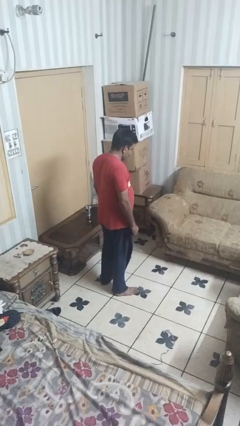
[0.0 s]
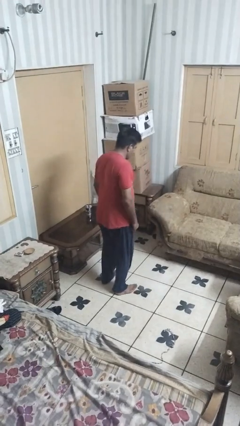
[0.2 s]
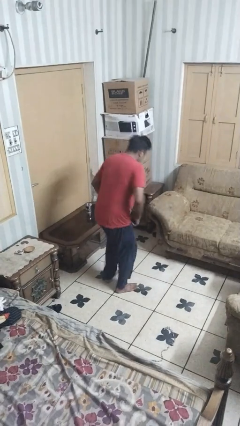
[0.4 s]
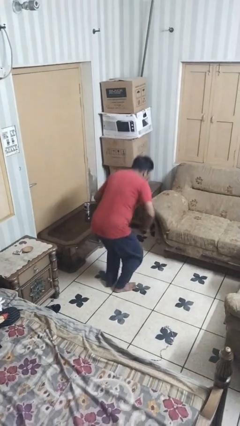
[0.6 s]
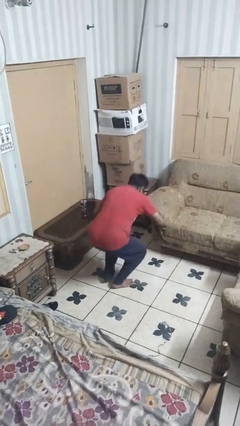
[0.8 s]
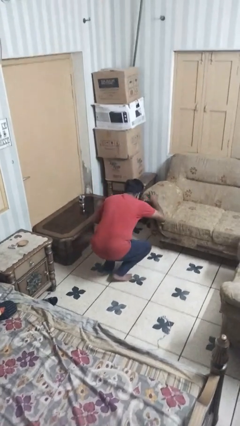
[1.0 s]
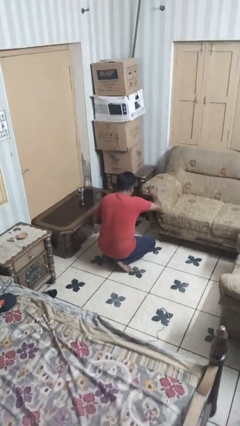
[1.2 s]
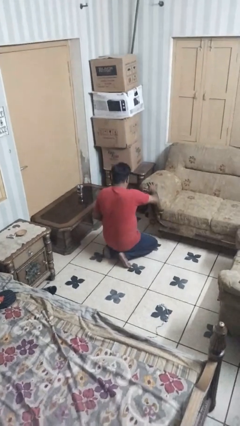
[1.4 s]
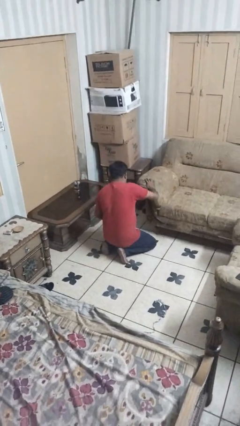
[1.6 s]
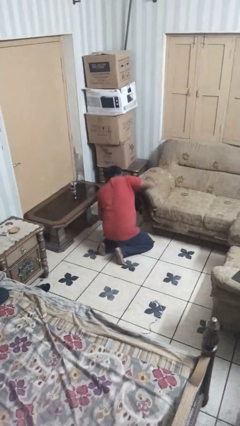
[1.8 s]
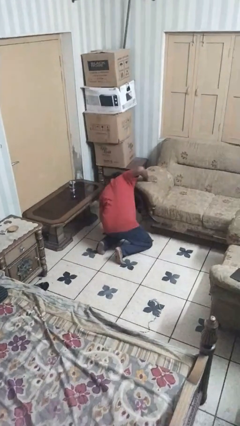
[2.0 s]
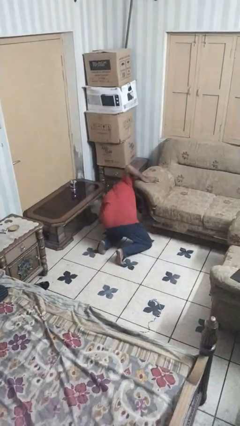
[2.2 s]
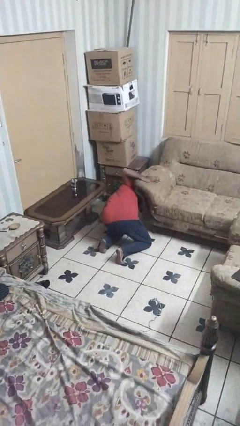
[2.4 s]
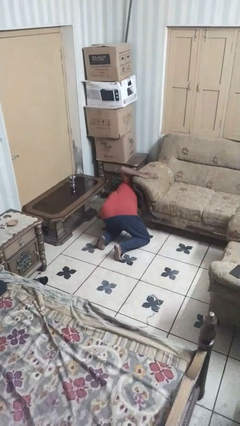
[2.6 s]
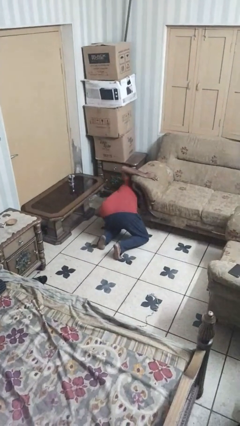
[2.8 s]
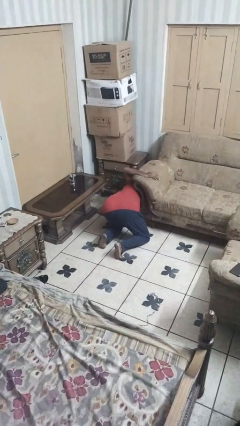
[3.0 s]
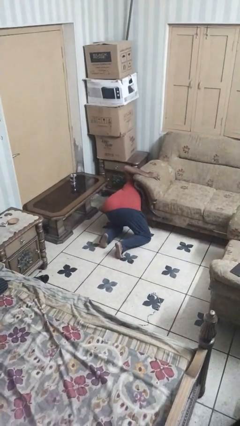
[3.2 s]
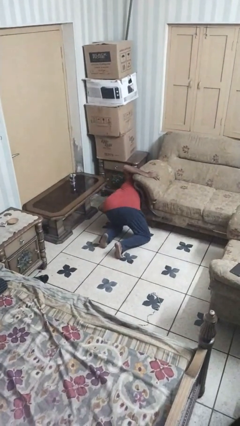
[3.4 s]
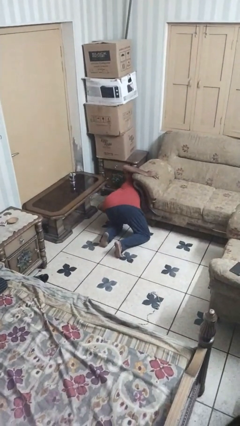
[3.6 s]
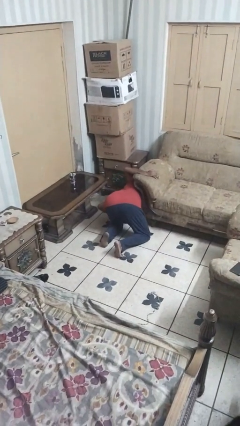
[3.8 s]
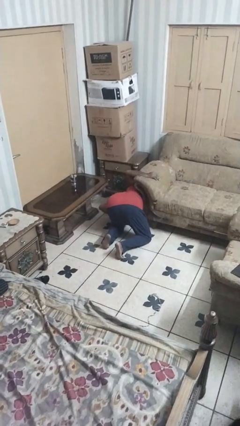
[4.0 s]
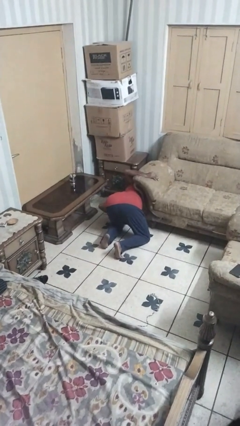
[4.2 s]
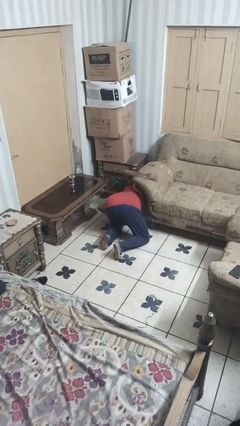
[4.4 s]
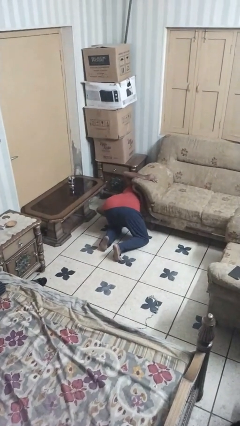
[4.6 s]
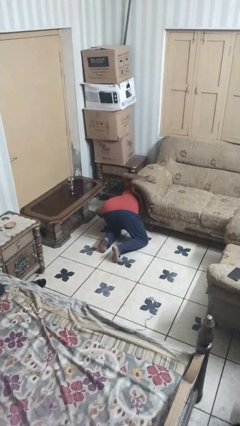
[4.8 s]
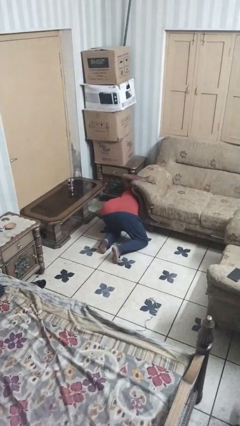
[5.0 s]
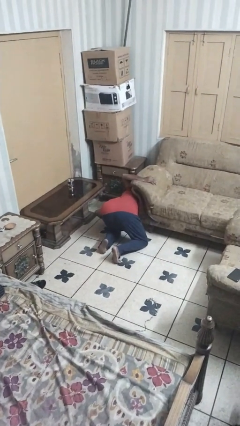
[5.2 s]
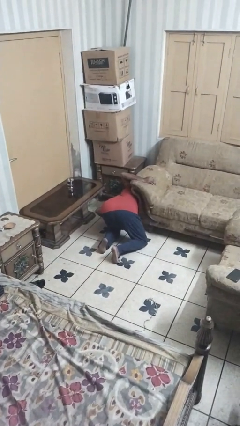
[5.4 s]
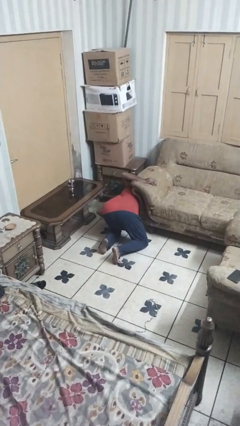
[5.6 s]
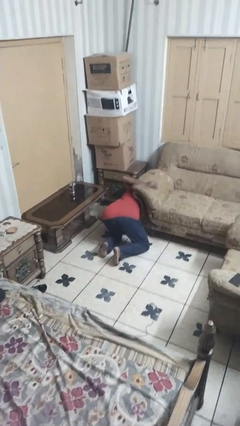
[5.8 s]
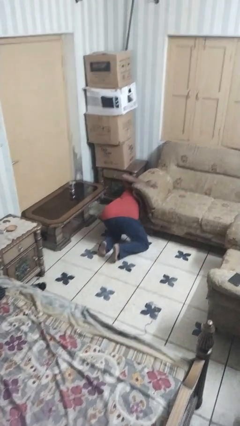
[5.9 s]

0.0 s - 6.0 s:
person searches under couch

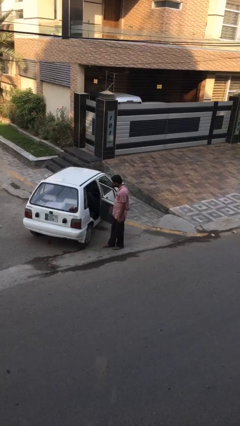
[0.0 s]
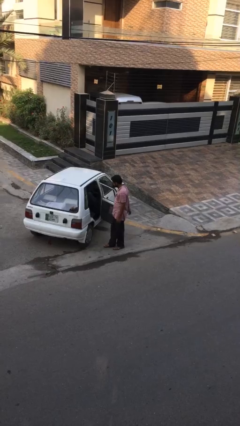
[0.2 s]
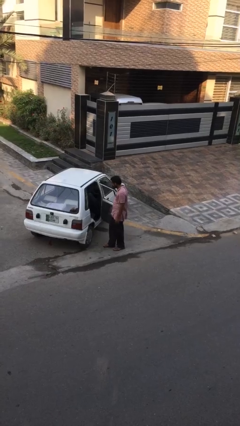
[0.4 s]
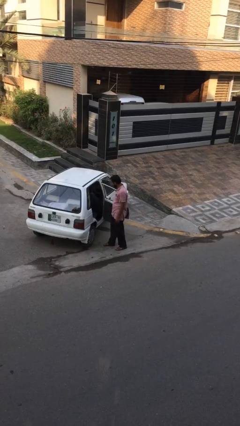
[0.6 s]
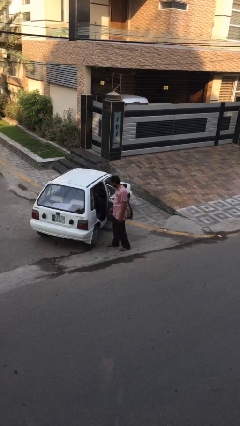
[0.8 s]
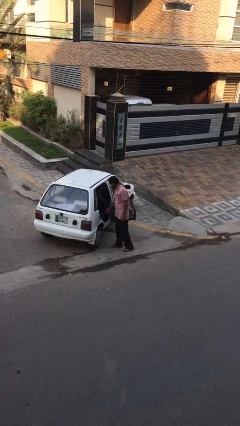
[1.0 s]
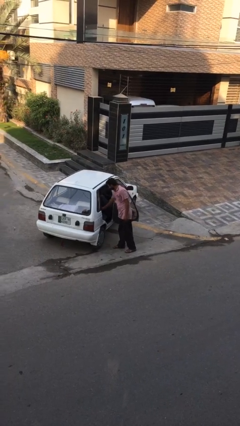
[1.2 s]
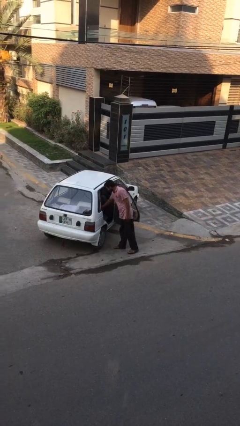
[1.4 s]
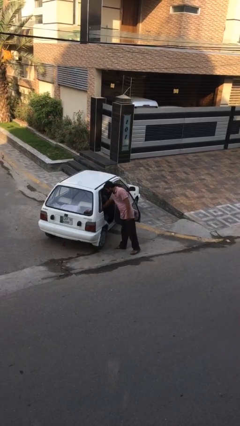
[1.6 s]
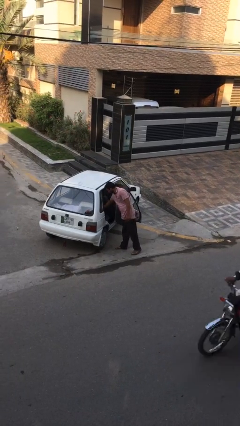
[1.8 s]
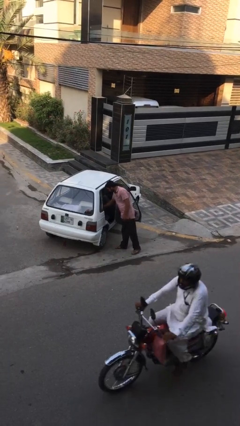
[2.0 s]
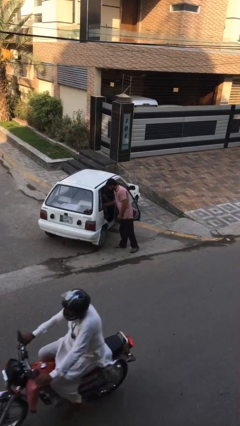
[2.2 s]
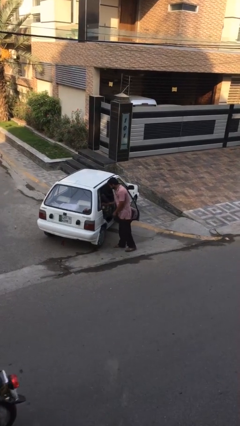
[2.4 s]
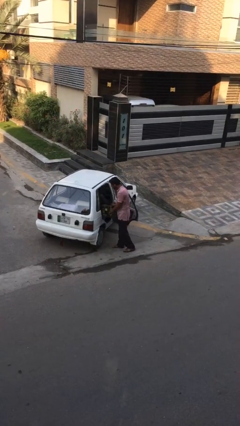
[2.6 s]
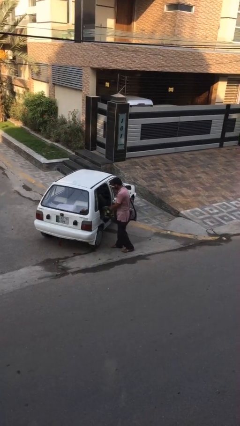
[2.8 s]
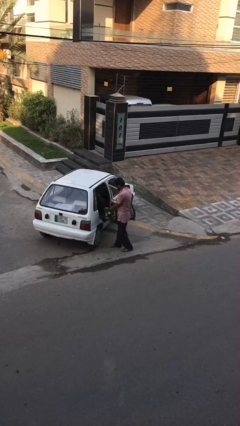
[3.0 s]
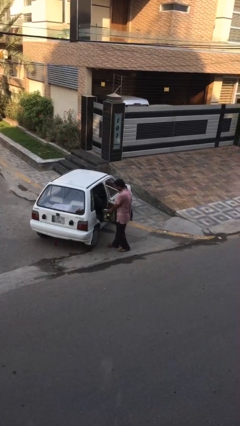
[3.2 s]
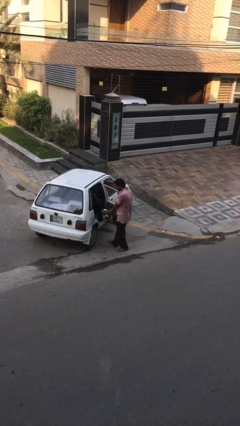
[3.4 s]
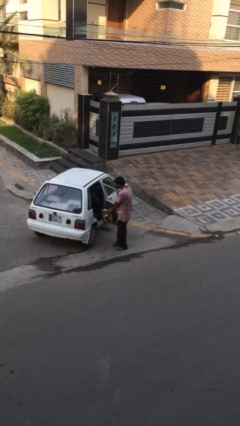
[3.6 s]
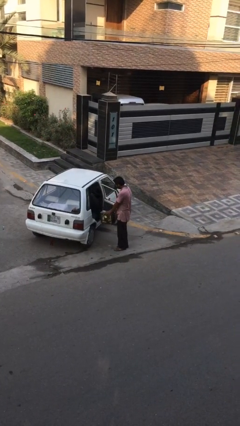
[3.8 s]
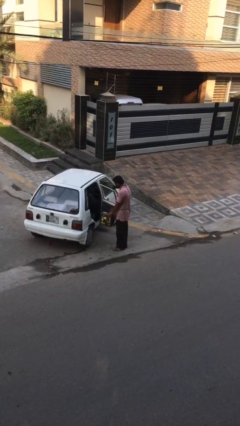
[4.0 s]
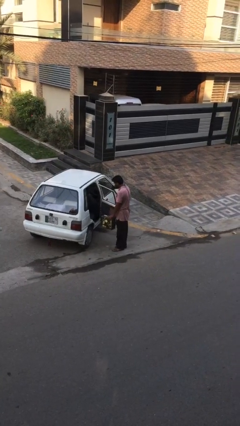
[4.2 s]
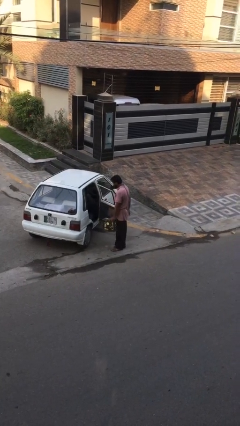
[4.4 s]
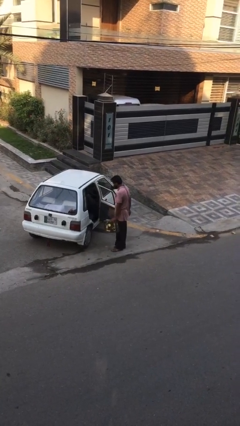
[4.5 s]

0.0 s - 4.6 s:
person unloads car

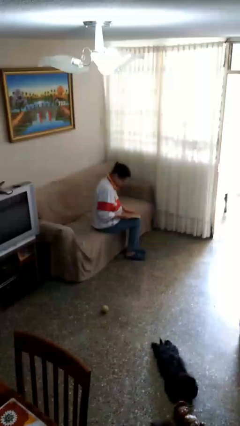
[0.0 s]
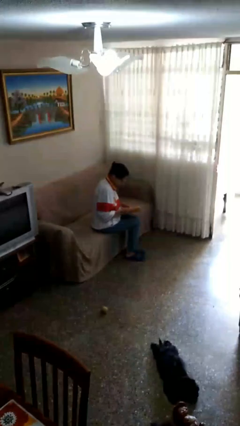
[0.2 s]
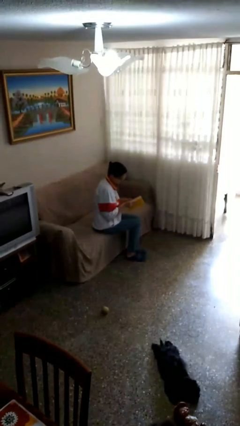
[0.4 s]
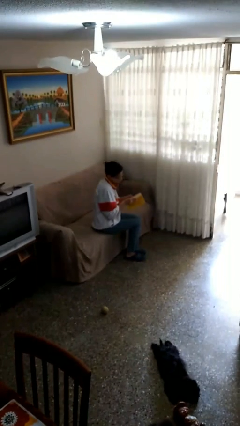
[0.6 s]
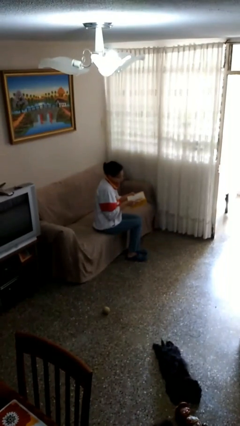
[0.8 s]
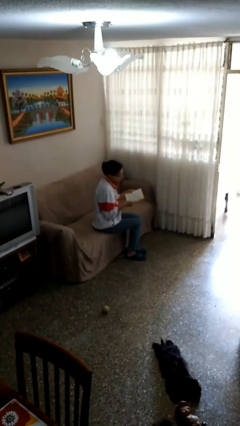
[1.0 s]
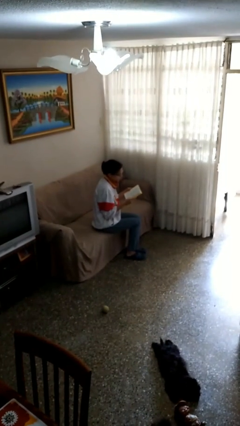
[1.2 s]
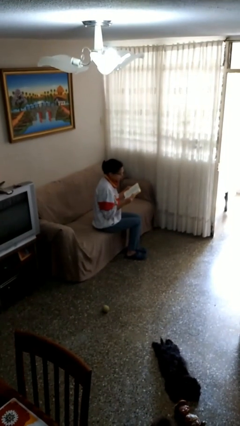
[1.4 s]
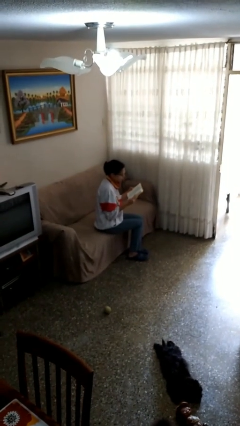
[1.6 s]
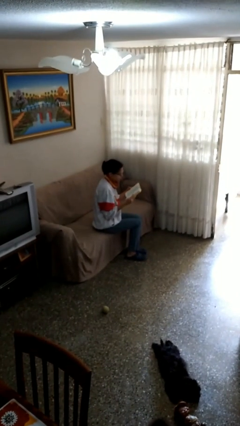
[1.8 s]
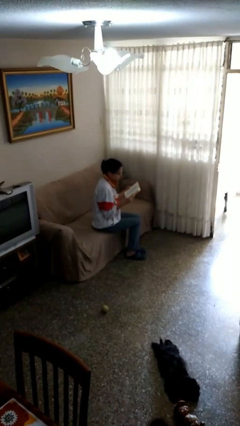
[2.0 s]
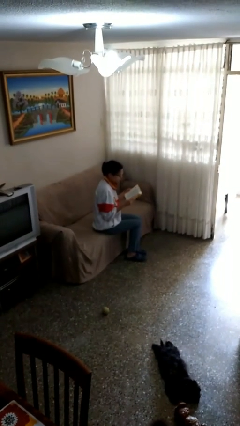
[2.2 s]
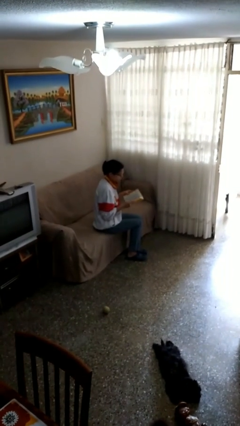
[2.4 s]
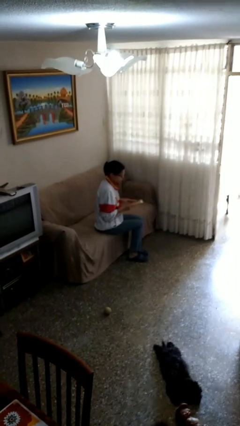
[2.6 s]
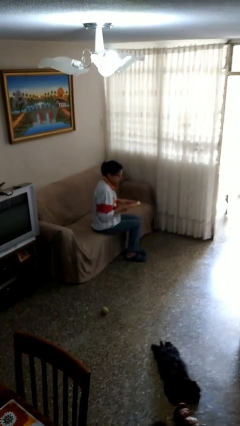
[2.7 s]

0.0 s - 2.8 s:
person reads document

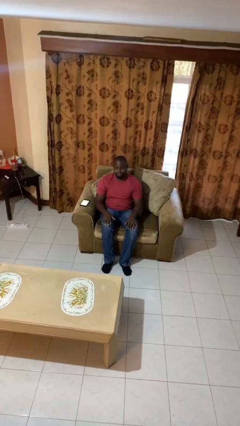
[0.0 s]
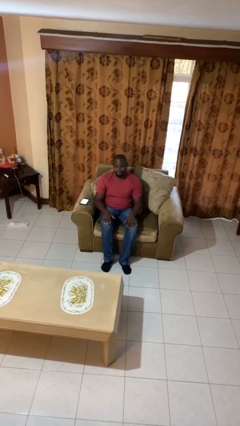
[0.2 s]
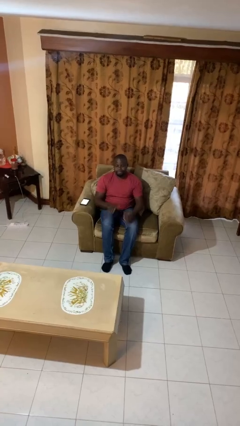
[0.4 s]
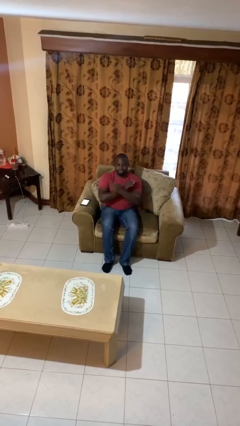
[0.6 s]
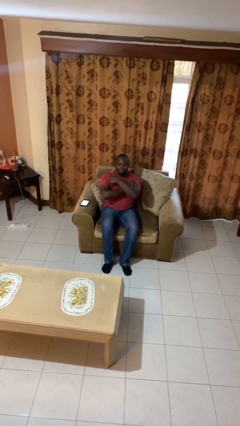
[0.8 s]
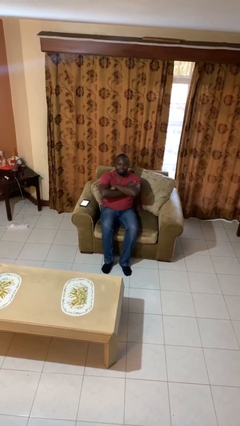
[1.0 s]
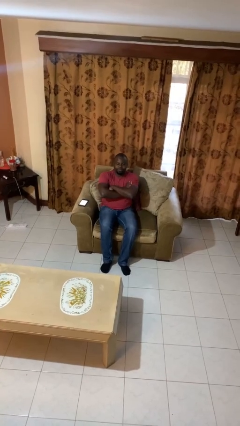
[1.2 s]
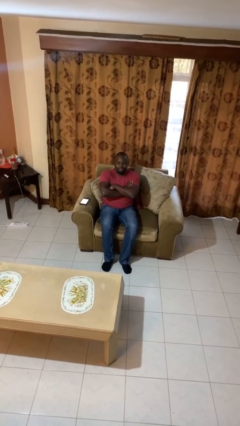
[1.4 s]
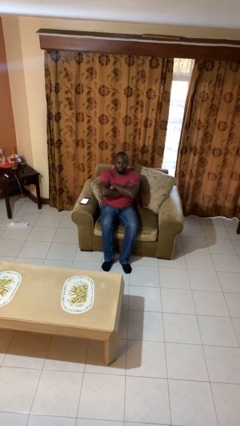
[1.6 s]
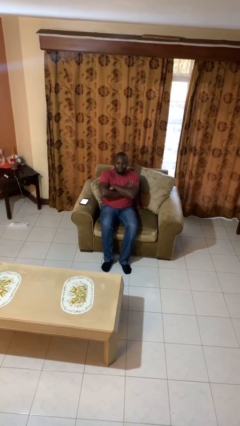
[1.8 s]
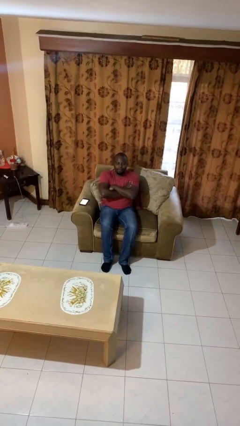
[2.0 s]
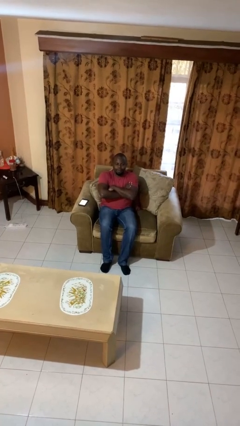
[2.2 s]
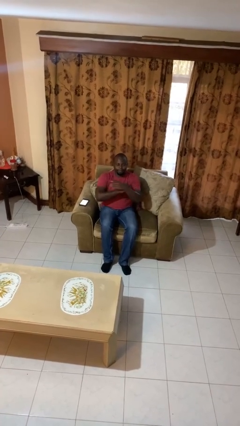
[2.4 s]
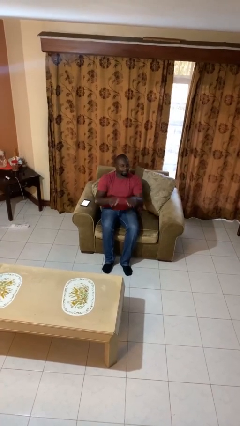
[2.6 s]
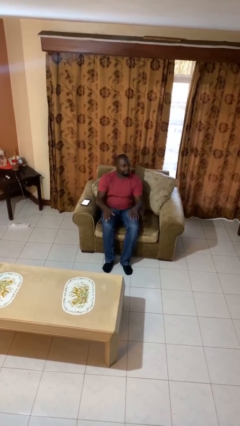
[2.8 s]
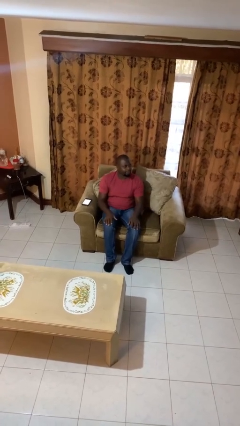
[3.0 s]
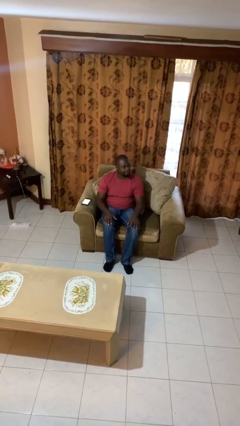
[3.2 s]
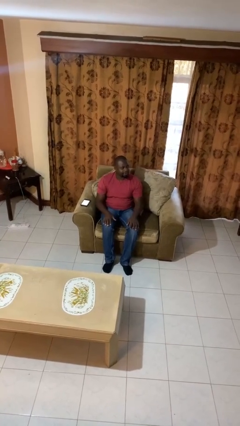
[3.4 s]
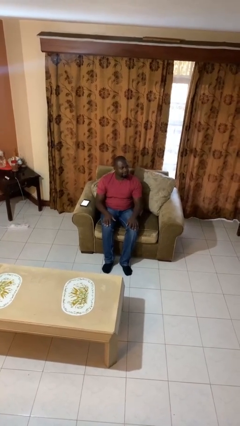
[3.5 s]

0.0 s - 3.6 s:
person crosses arms

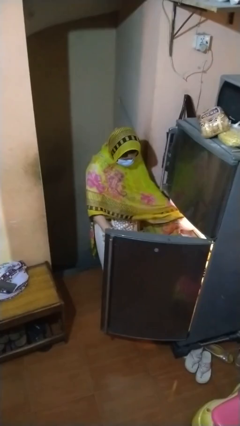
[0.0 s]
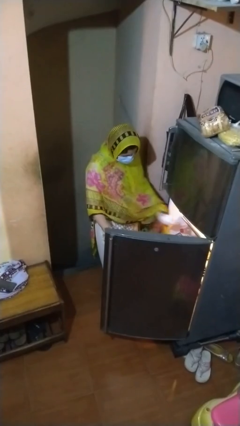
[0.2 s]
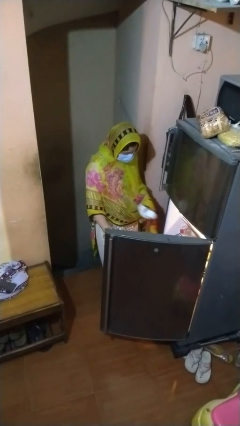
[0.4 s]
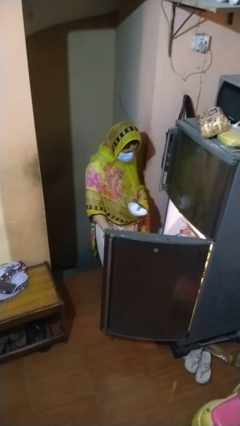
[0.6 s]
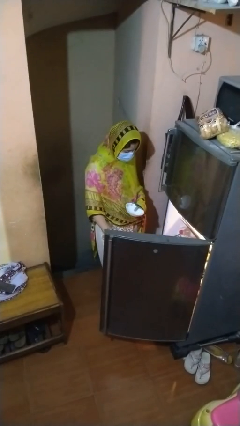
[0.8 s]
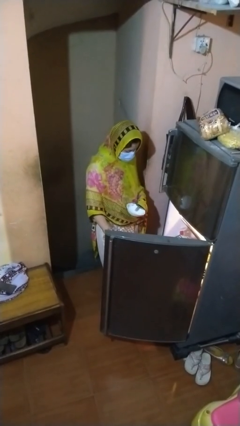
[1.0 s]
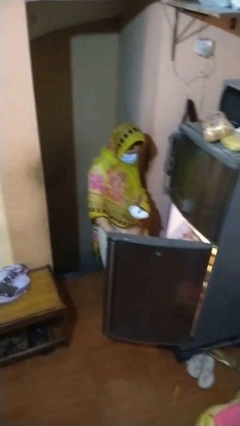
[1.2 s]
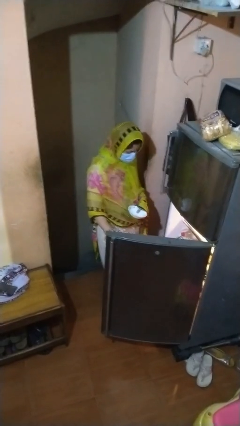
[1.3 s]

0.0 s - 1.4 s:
person takes object from refrigerator
